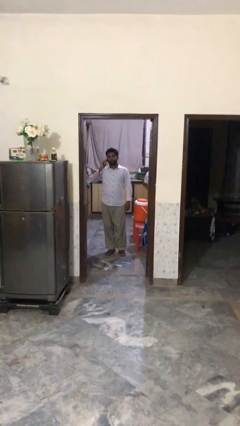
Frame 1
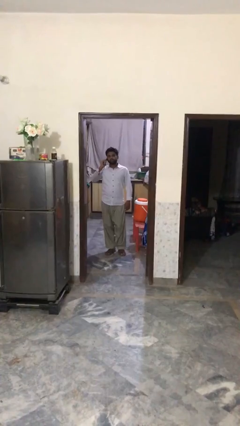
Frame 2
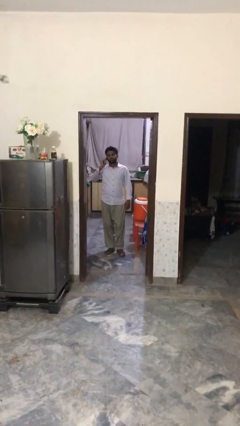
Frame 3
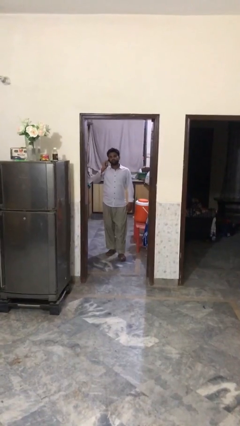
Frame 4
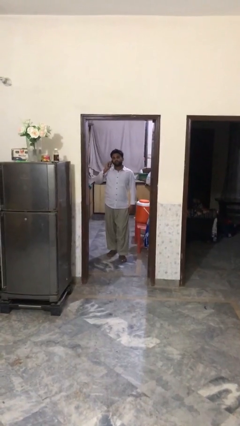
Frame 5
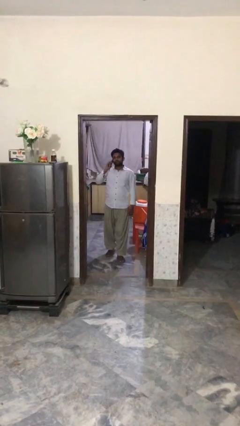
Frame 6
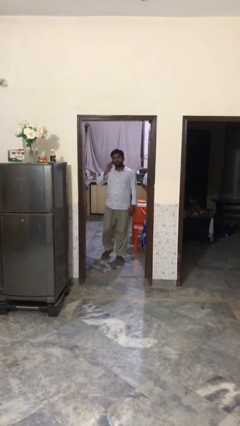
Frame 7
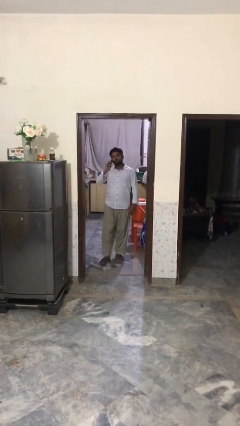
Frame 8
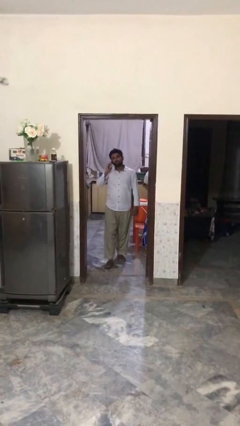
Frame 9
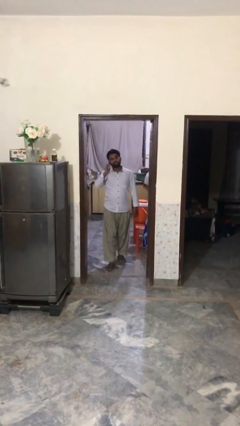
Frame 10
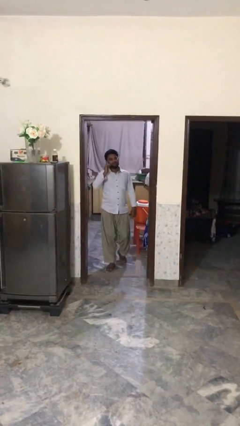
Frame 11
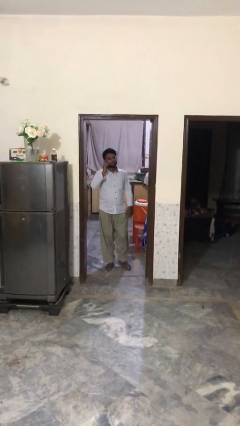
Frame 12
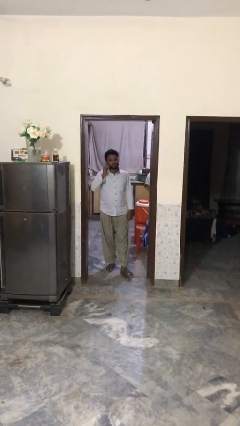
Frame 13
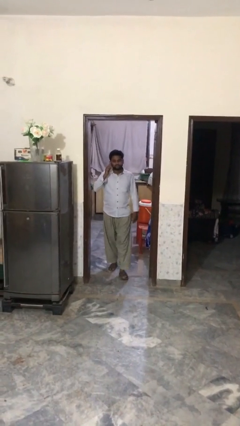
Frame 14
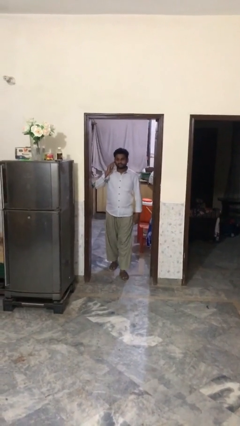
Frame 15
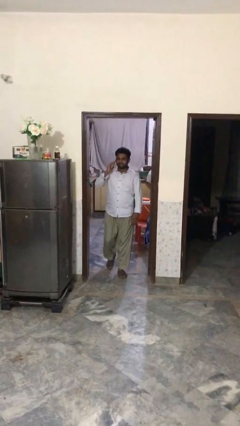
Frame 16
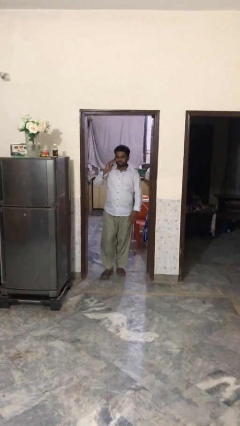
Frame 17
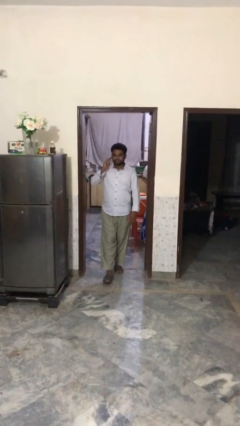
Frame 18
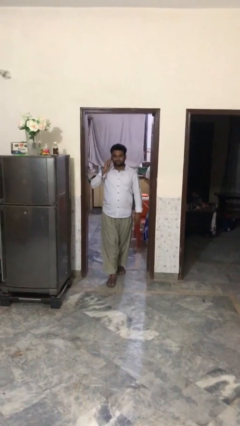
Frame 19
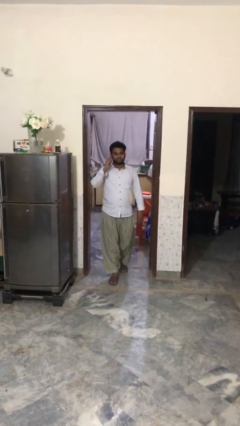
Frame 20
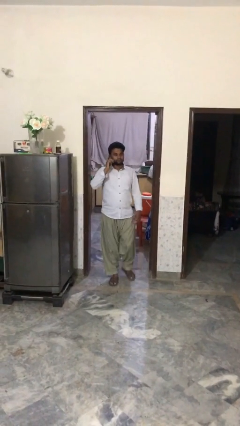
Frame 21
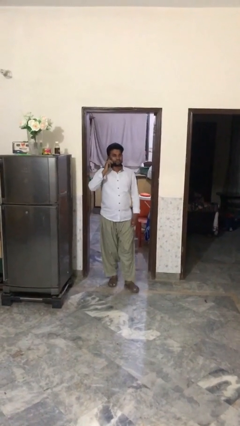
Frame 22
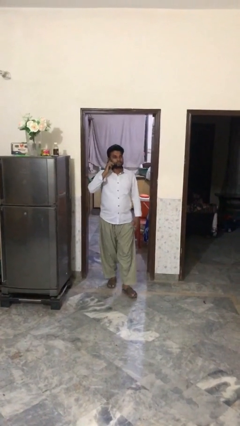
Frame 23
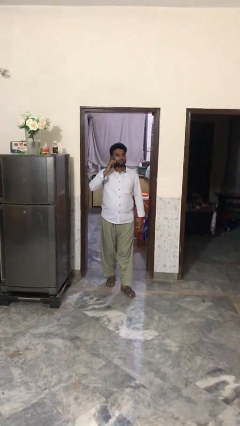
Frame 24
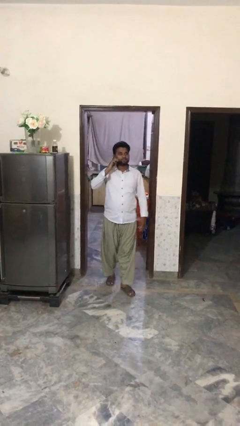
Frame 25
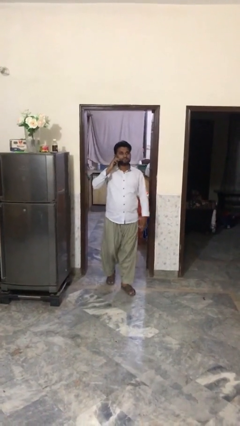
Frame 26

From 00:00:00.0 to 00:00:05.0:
person enters scene through structure

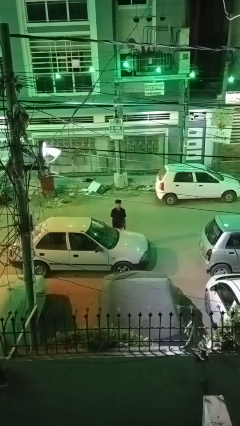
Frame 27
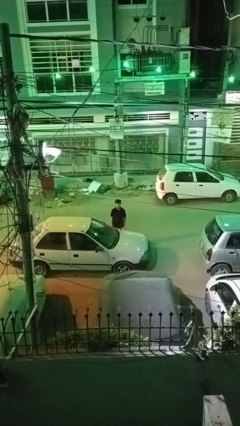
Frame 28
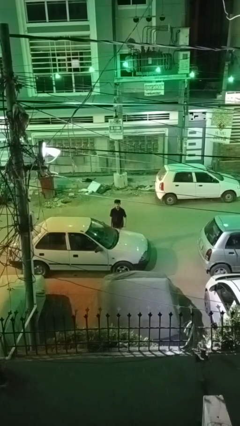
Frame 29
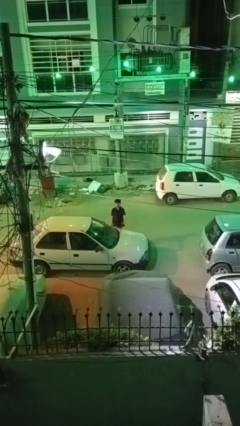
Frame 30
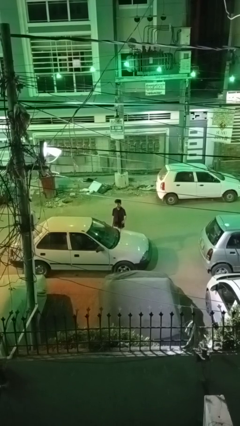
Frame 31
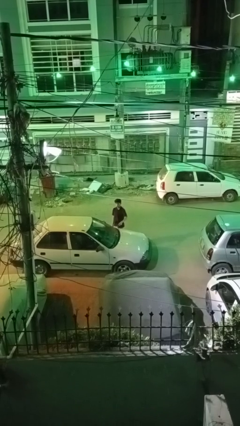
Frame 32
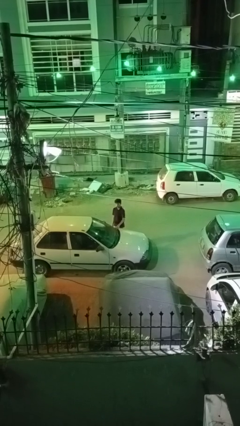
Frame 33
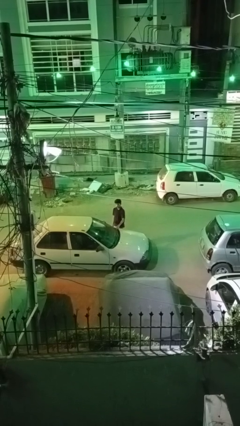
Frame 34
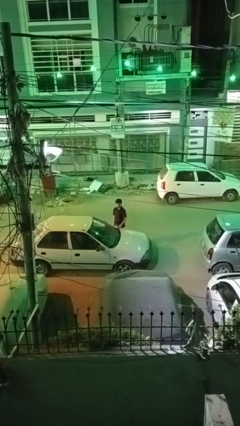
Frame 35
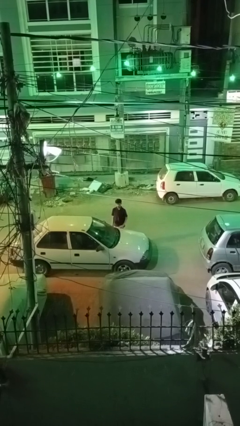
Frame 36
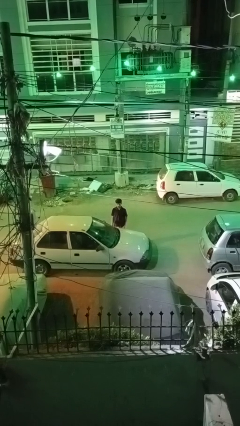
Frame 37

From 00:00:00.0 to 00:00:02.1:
person flips down car wipers

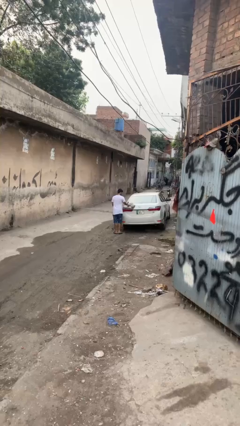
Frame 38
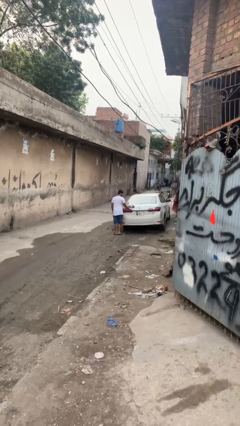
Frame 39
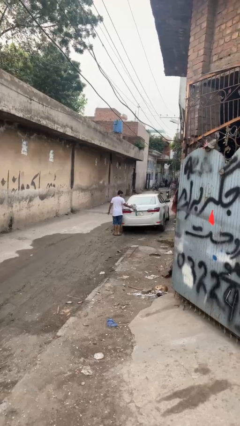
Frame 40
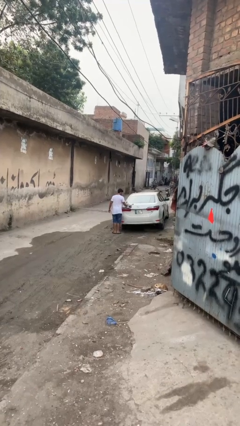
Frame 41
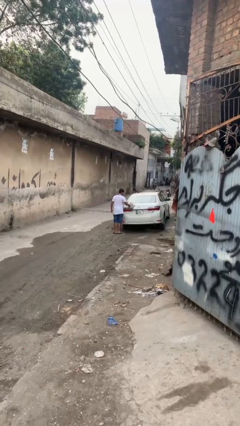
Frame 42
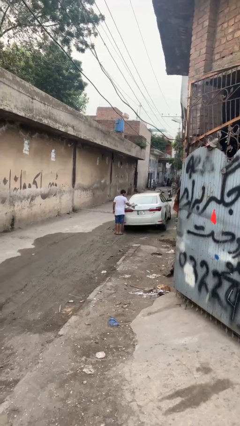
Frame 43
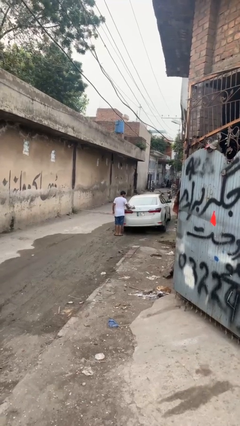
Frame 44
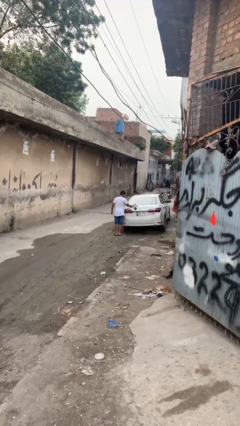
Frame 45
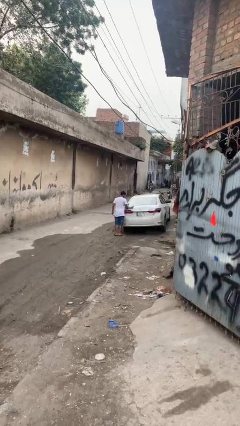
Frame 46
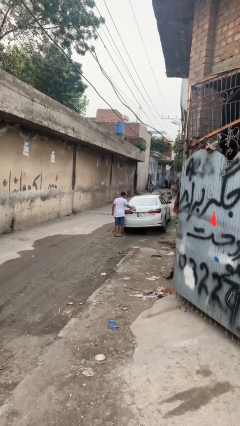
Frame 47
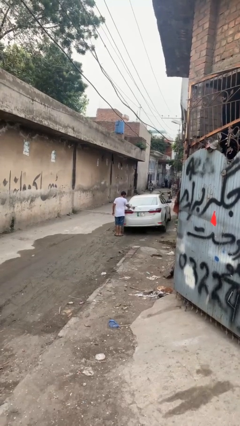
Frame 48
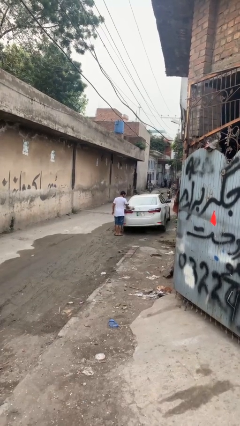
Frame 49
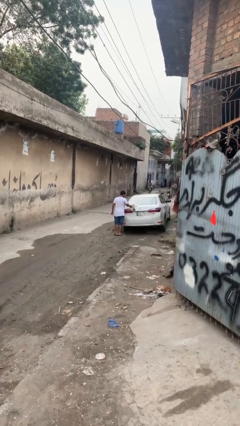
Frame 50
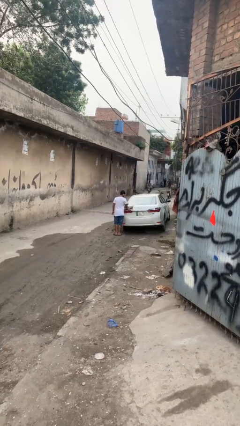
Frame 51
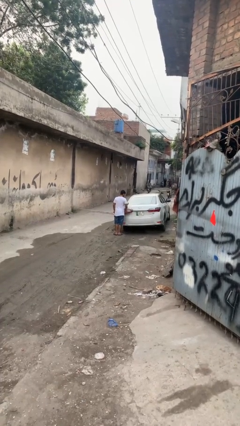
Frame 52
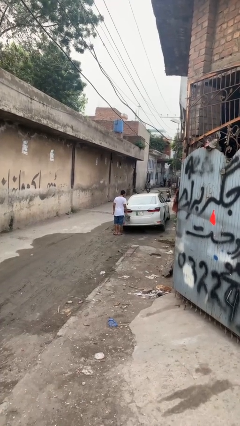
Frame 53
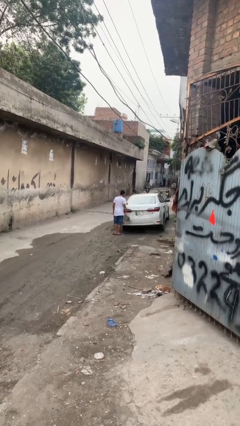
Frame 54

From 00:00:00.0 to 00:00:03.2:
person polishes car with rag

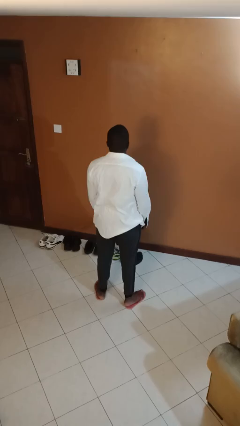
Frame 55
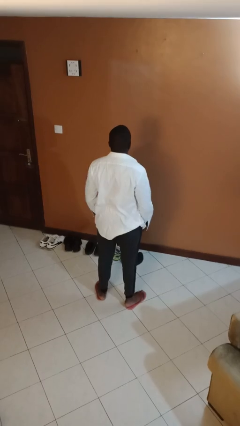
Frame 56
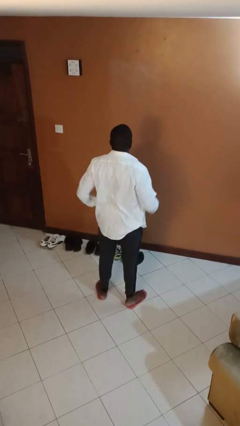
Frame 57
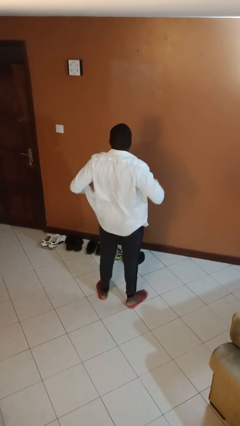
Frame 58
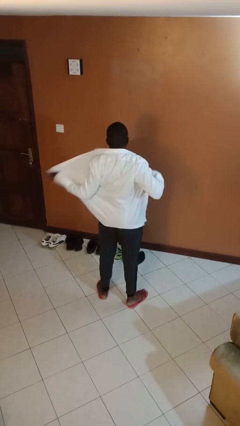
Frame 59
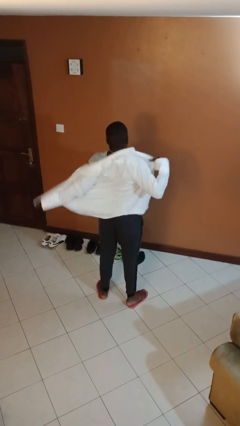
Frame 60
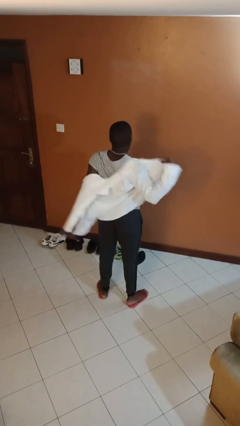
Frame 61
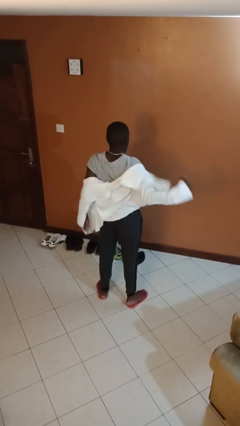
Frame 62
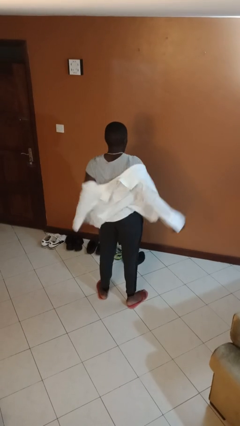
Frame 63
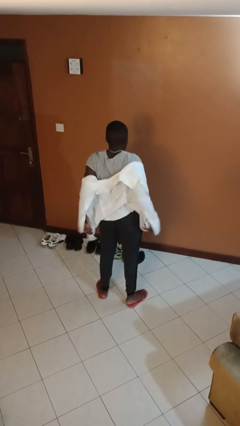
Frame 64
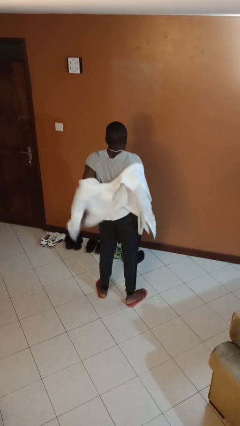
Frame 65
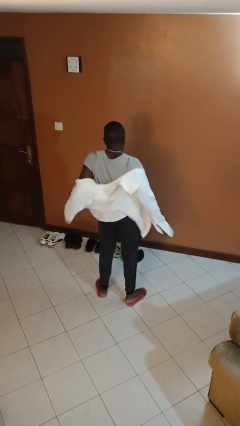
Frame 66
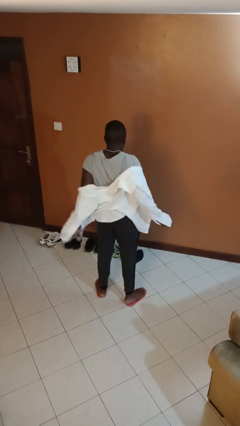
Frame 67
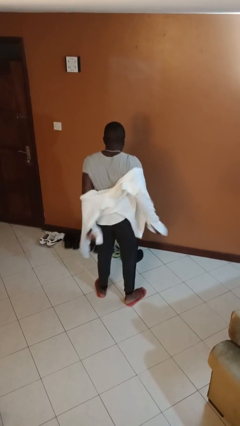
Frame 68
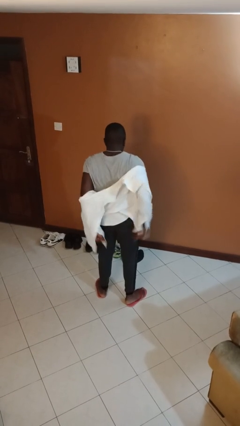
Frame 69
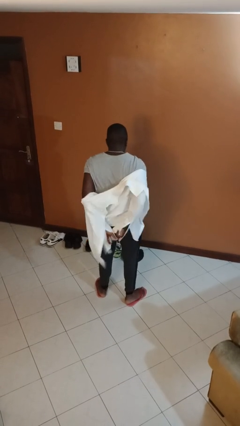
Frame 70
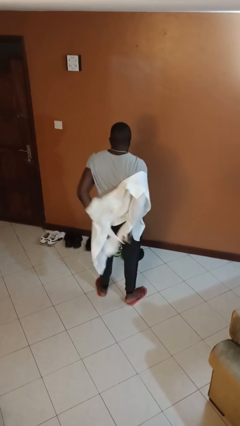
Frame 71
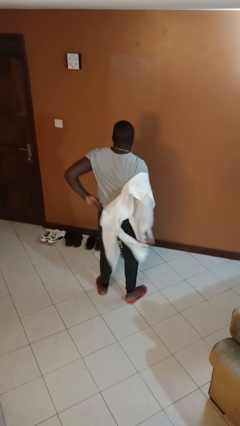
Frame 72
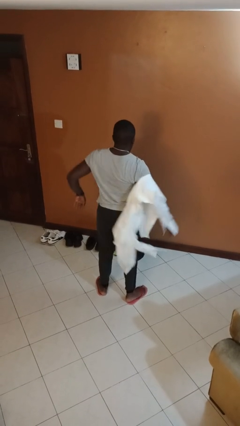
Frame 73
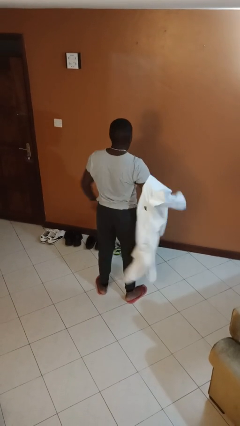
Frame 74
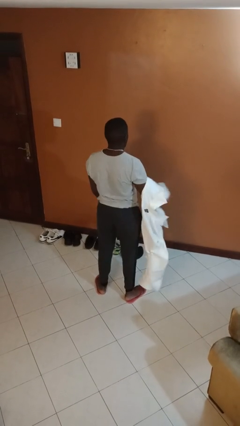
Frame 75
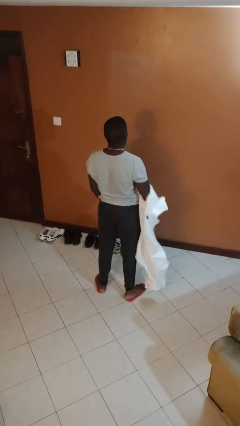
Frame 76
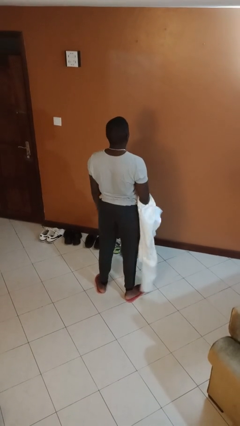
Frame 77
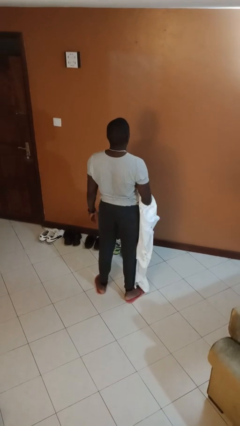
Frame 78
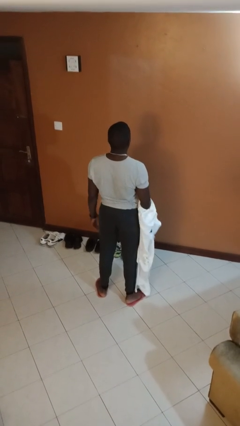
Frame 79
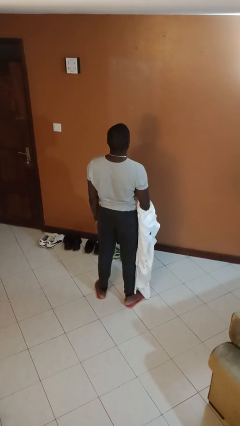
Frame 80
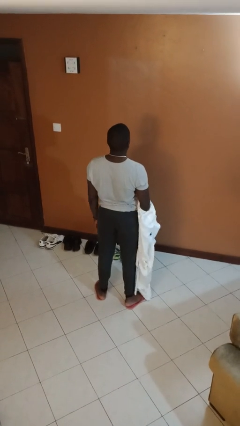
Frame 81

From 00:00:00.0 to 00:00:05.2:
person takes off shirt

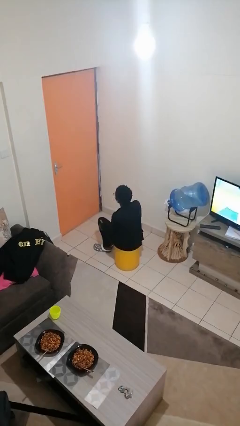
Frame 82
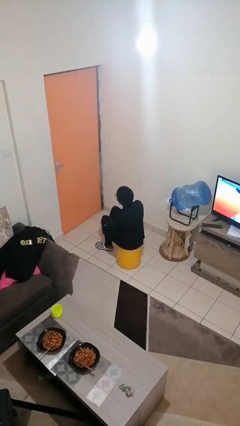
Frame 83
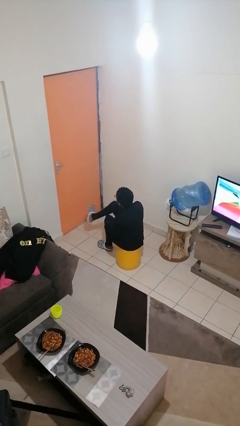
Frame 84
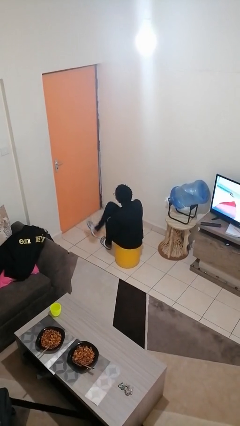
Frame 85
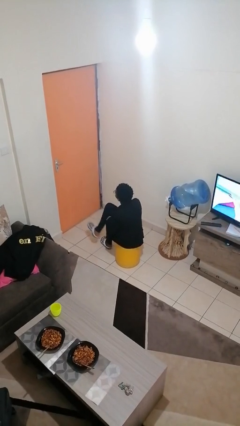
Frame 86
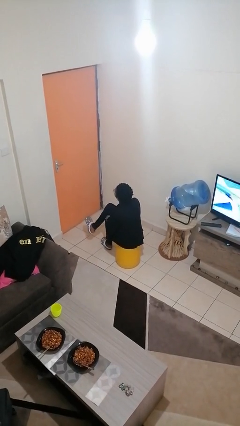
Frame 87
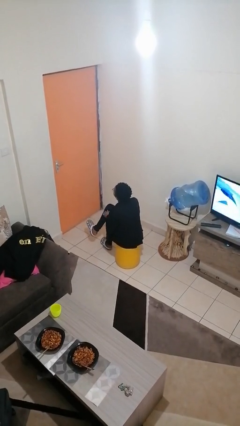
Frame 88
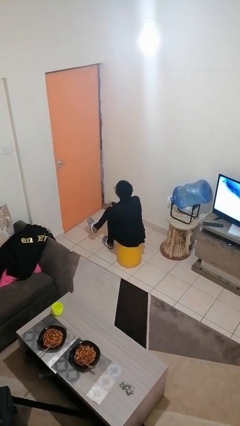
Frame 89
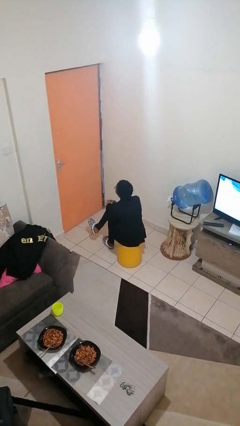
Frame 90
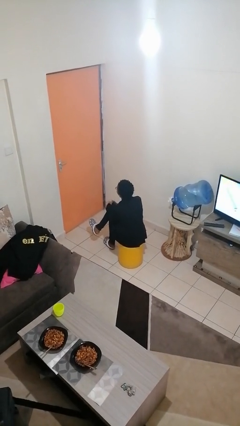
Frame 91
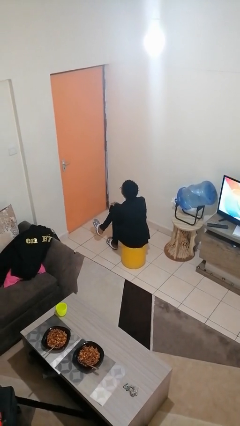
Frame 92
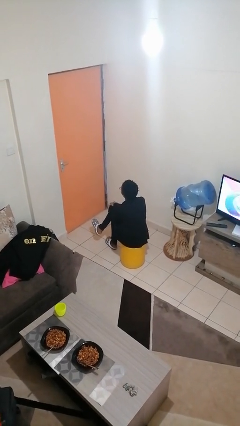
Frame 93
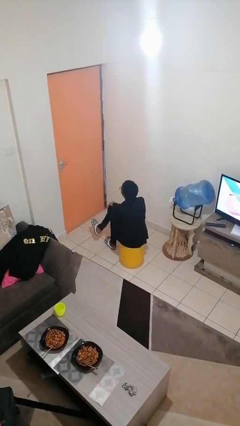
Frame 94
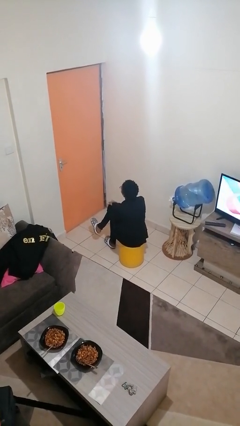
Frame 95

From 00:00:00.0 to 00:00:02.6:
person crosses legs
